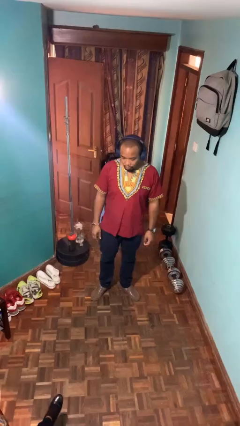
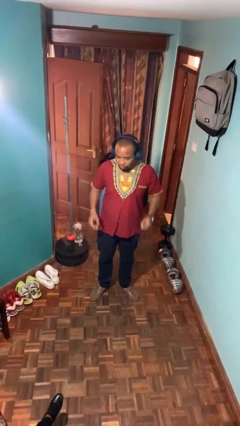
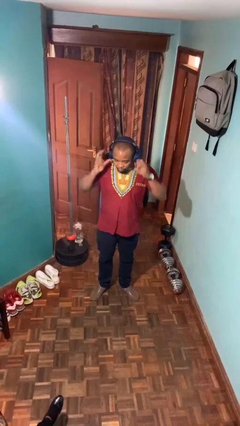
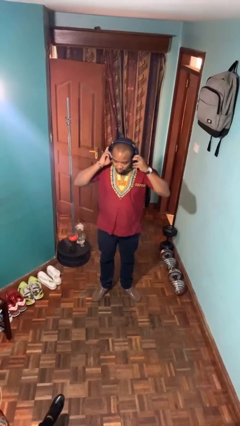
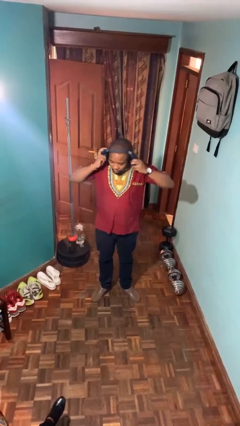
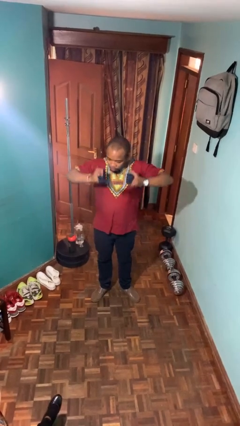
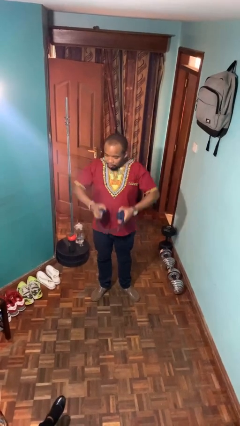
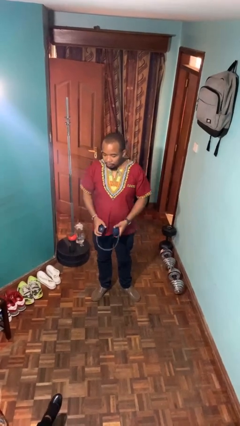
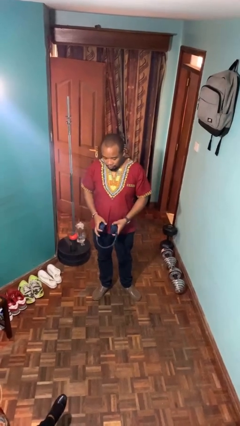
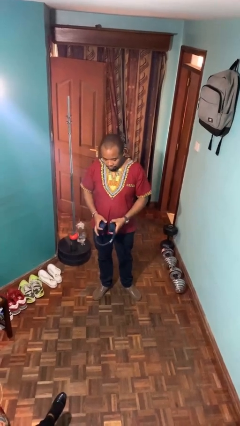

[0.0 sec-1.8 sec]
person takes off headphones

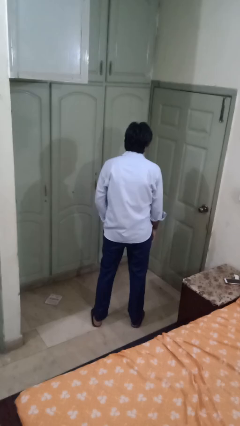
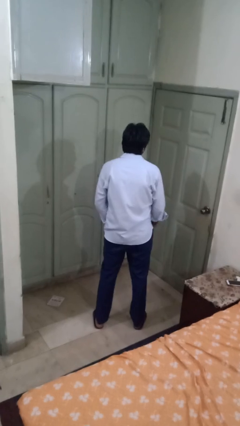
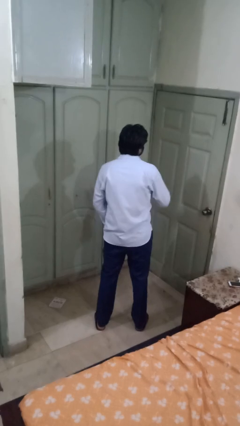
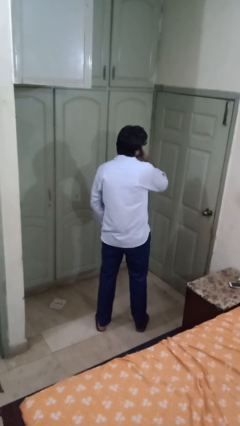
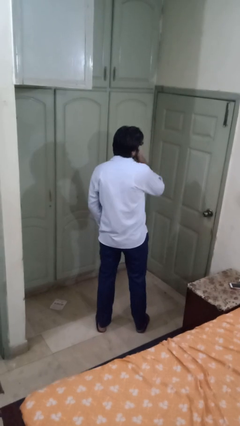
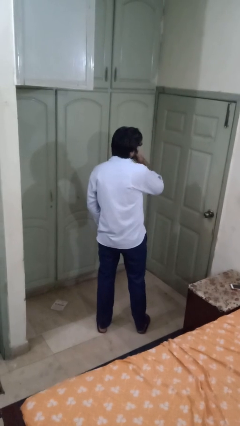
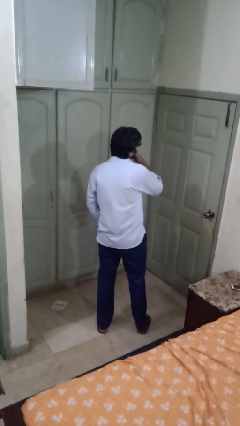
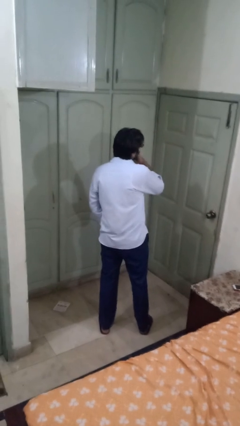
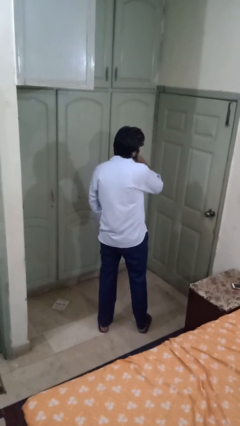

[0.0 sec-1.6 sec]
person strokes chin

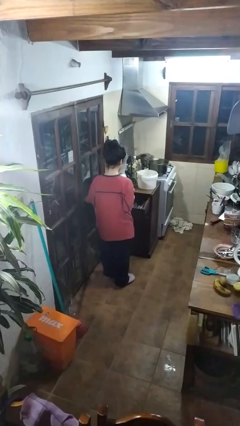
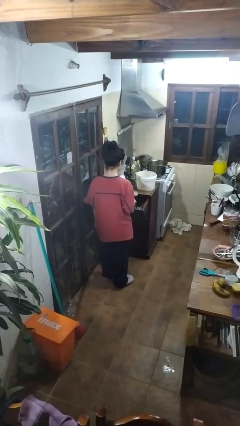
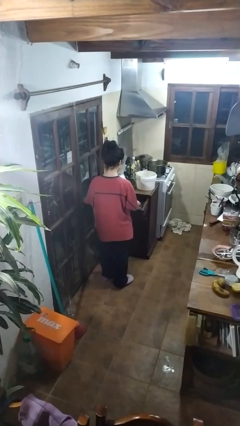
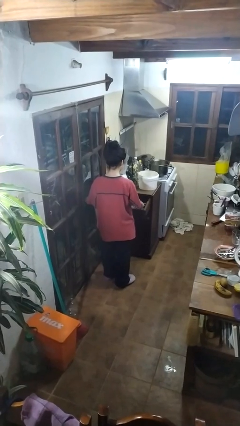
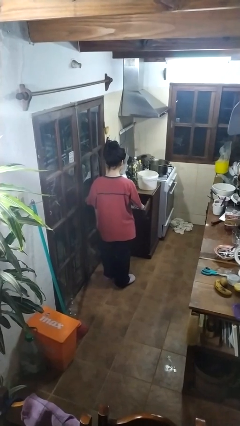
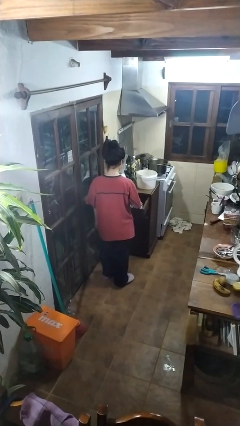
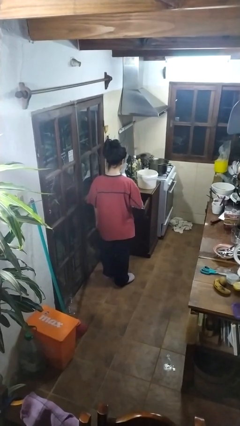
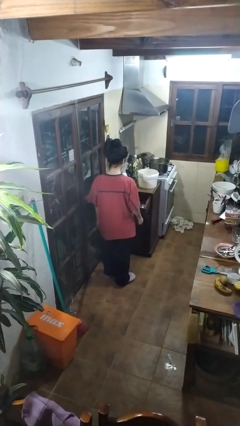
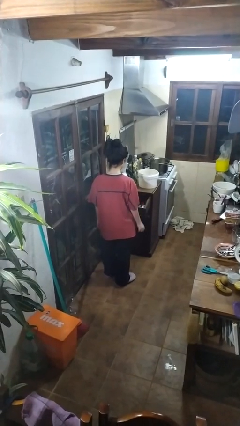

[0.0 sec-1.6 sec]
person puts object into kitchen drawer

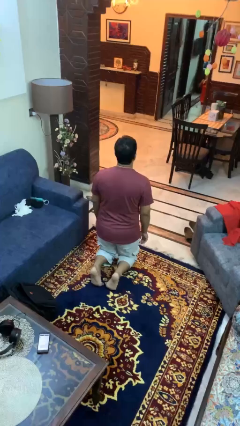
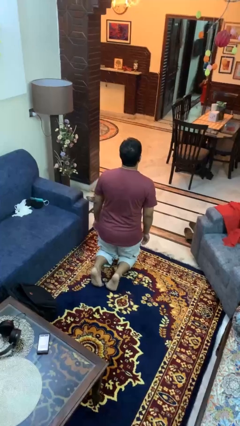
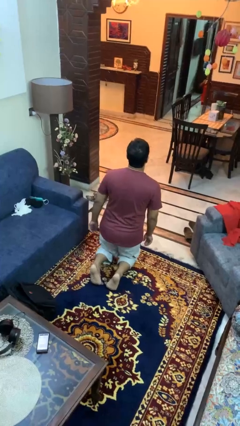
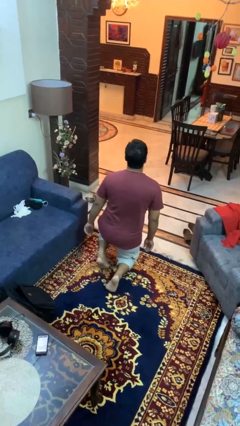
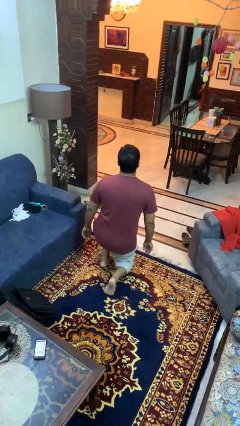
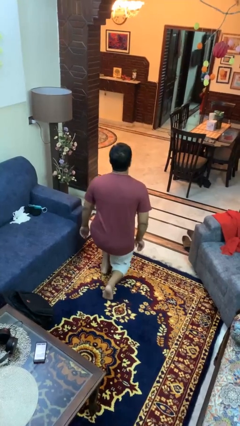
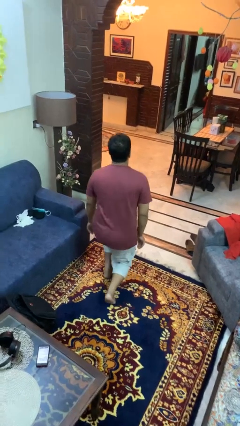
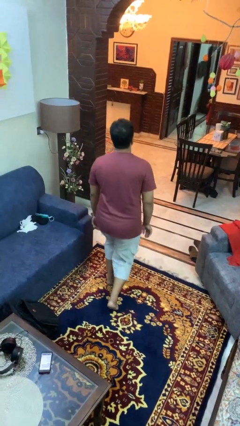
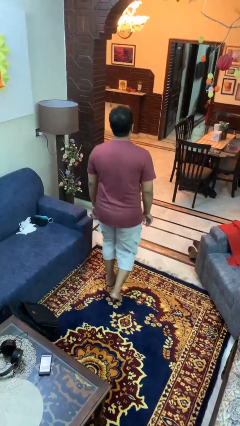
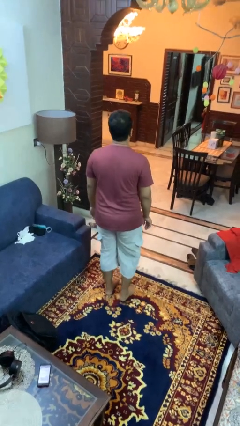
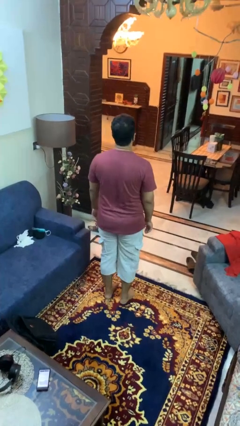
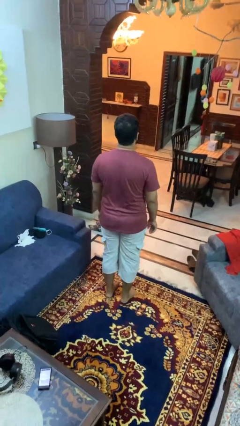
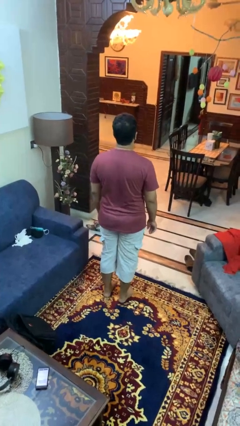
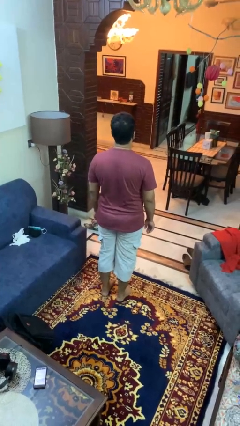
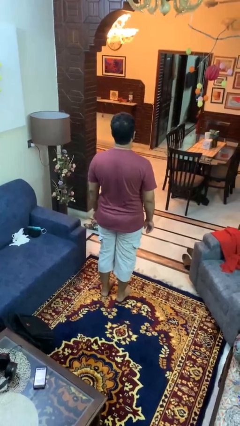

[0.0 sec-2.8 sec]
person stands up from floor

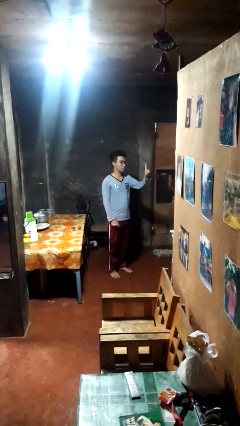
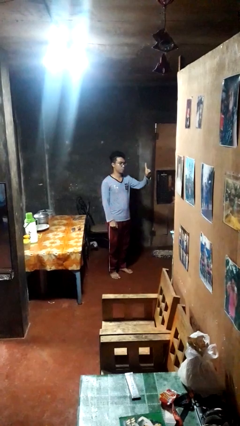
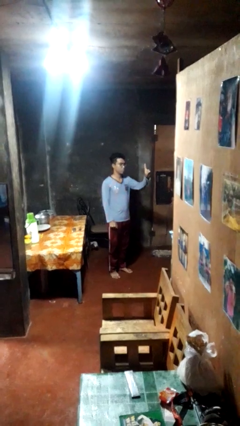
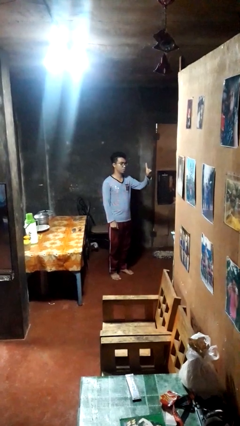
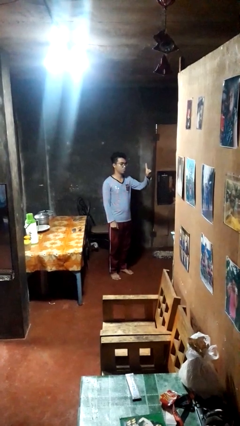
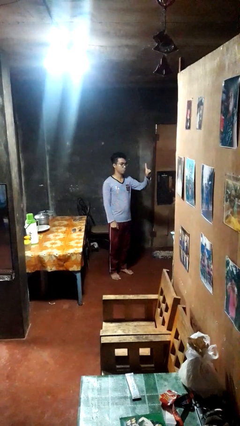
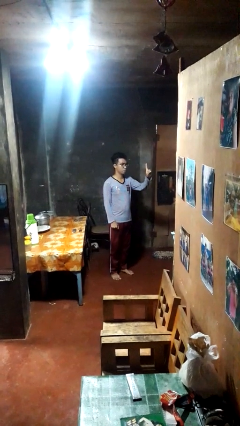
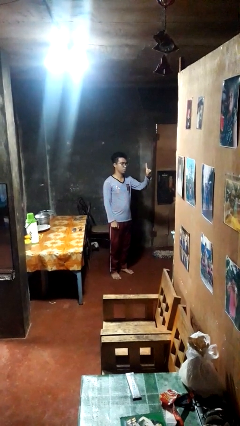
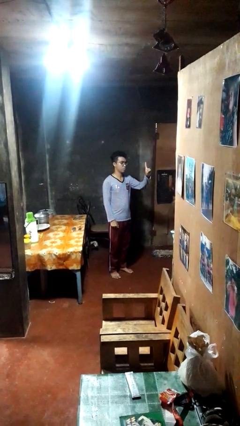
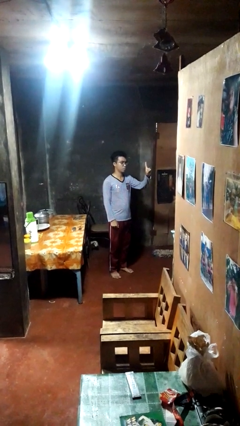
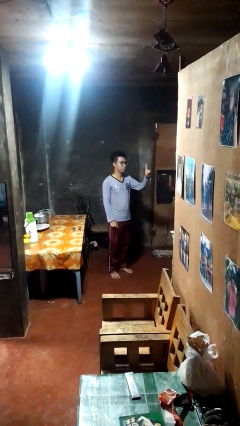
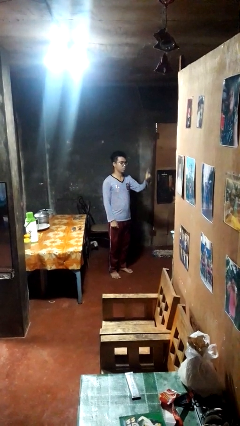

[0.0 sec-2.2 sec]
person gestures number one

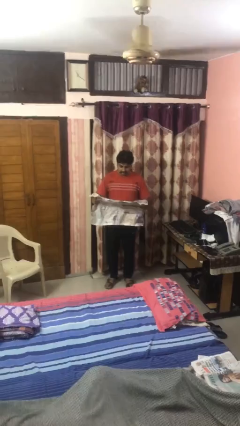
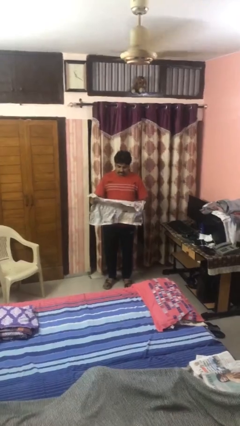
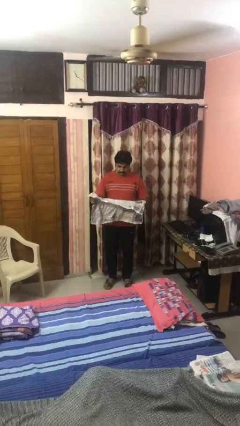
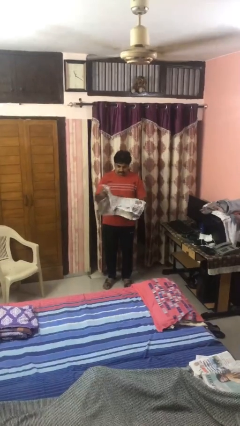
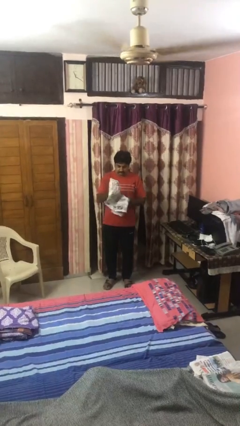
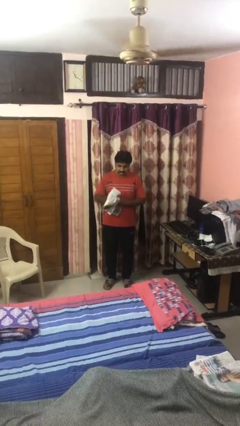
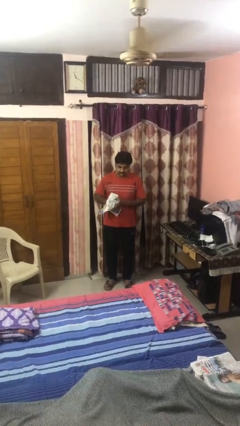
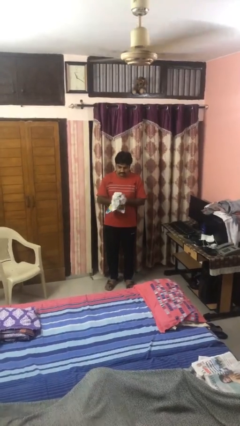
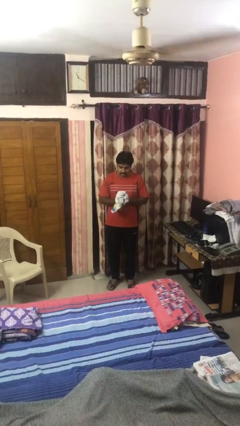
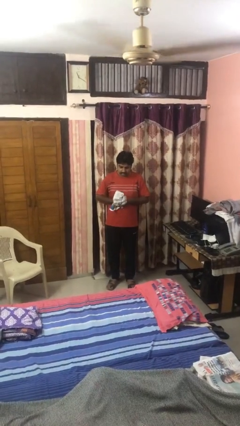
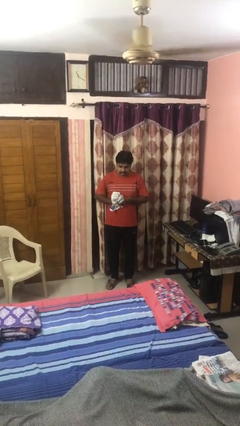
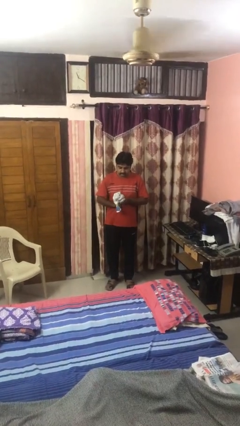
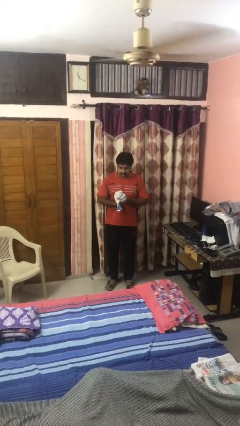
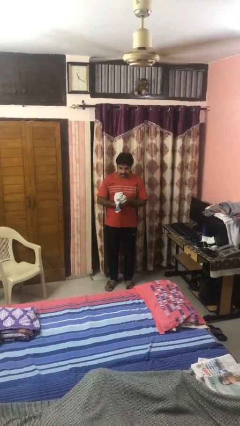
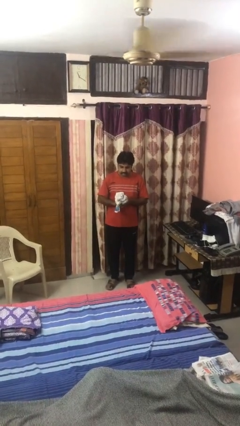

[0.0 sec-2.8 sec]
person crumples paper

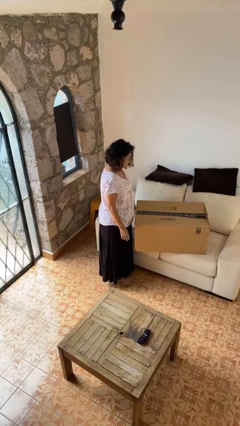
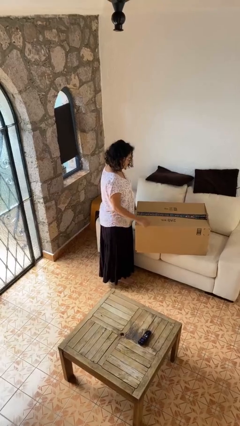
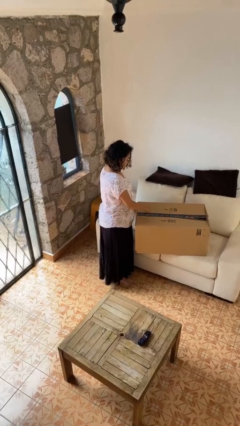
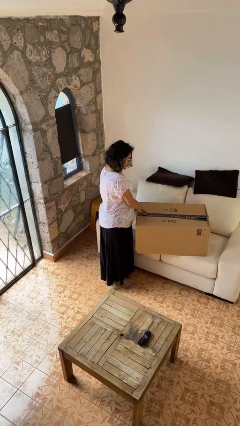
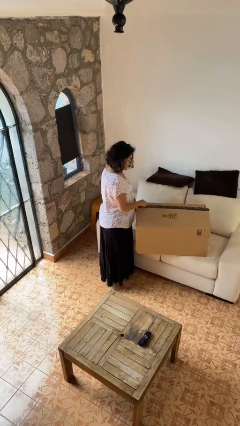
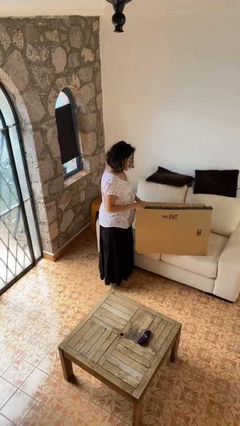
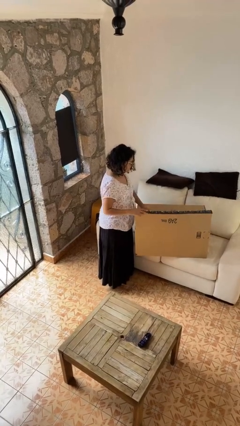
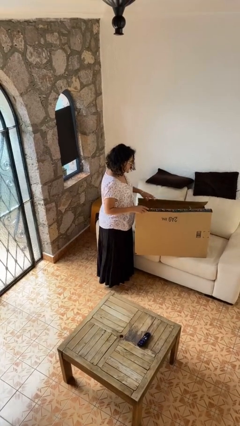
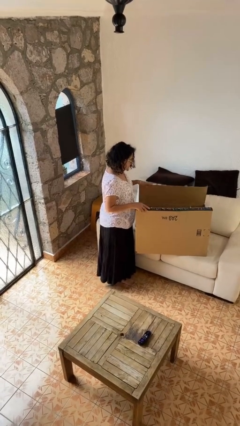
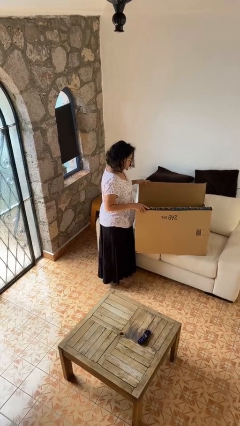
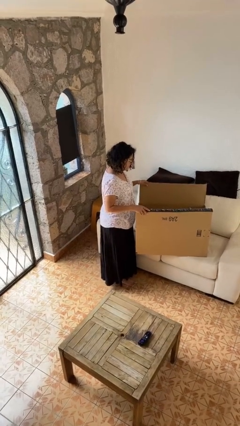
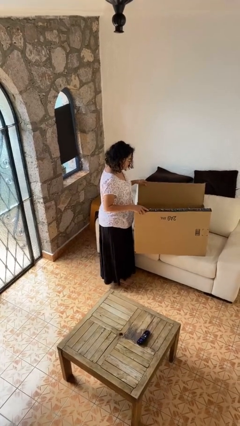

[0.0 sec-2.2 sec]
person opens box

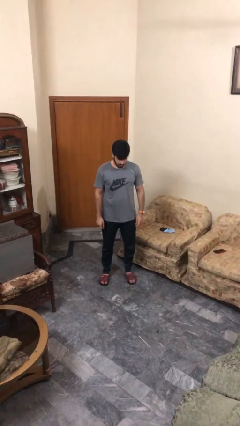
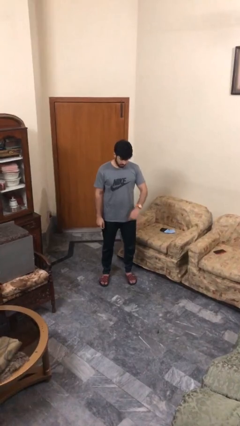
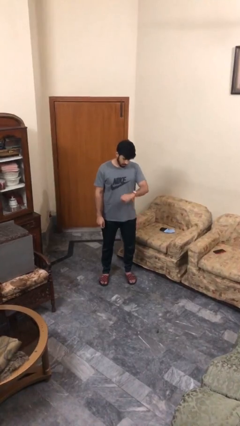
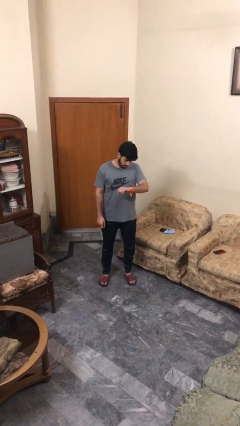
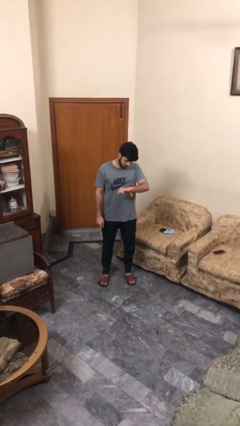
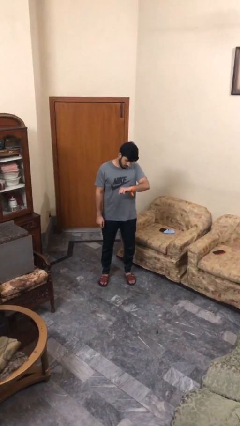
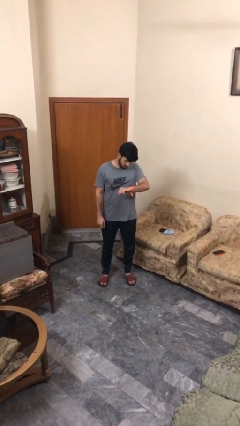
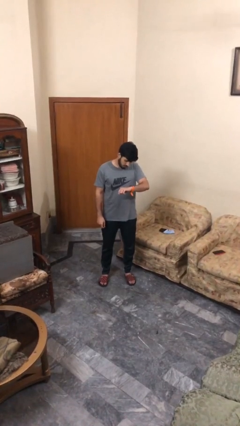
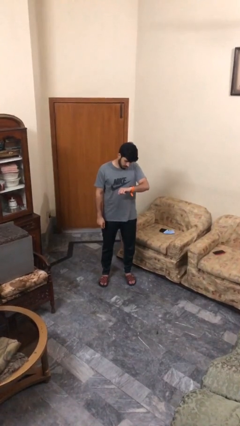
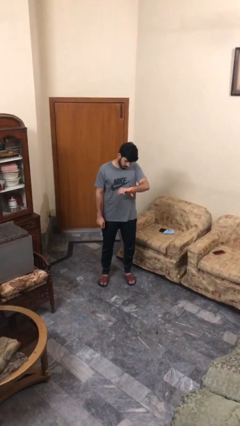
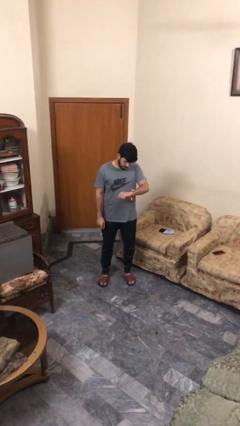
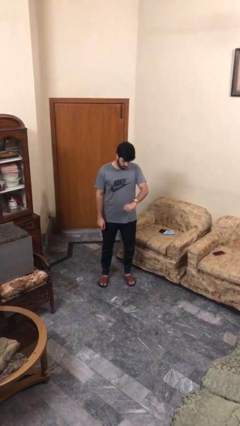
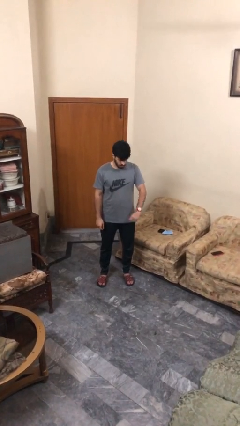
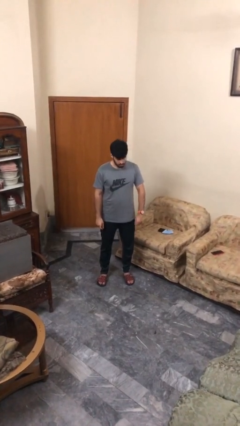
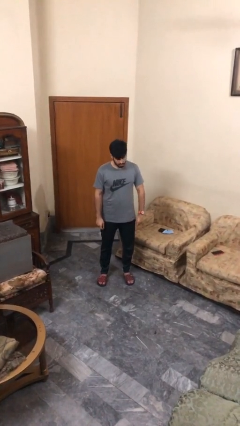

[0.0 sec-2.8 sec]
person looks at wristwatch
